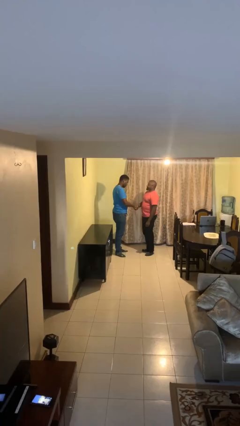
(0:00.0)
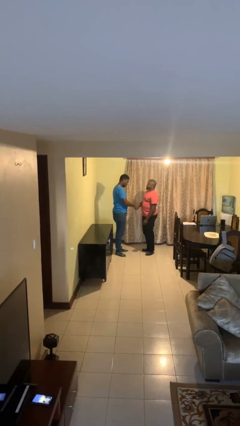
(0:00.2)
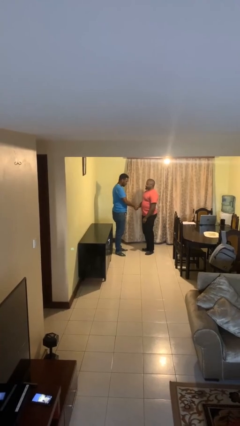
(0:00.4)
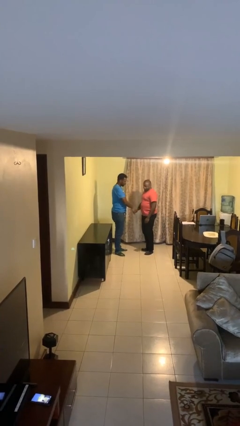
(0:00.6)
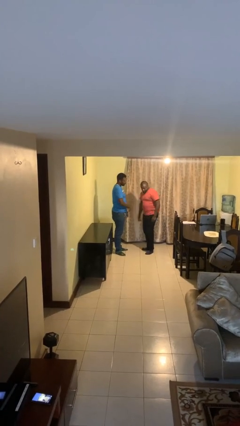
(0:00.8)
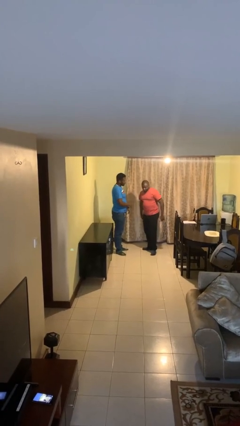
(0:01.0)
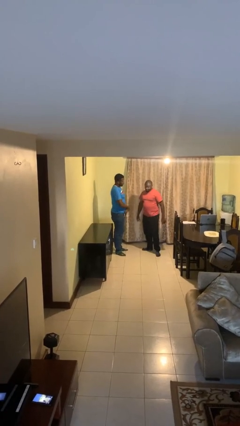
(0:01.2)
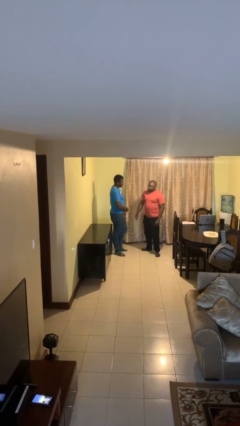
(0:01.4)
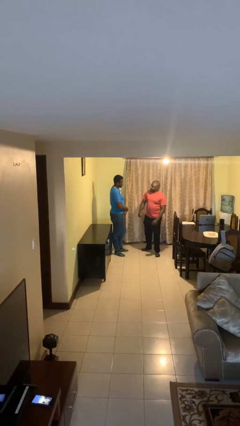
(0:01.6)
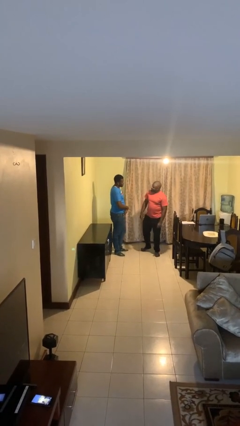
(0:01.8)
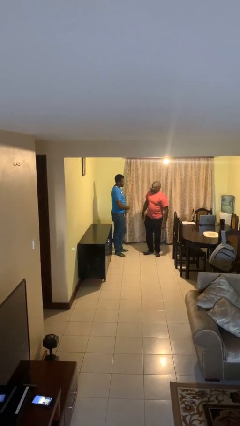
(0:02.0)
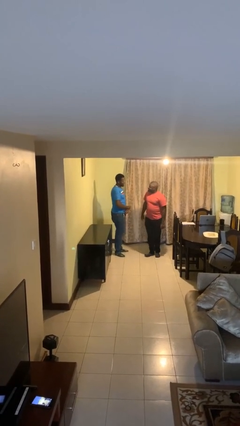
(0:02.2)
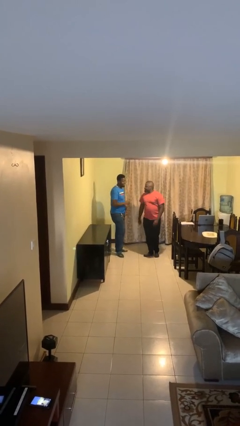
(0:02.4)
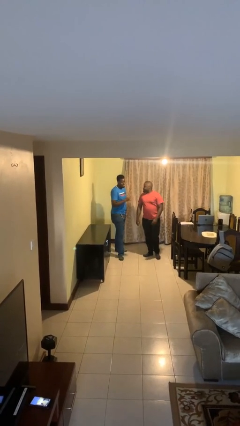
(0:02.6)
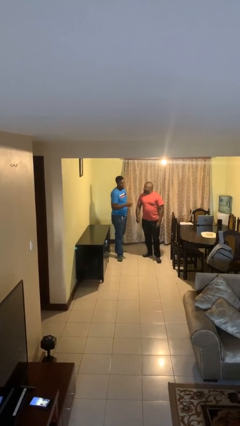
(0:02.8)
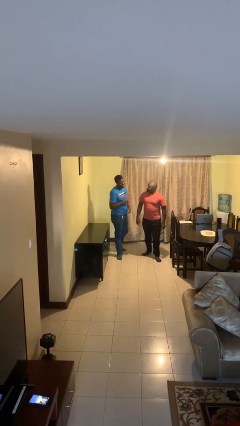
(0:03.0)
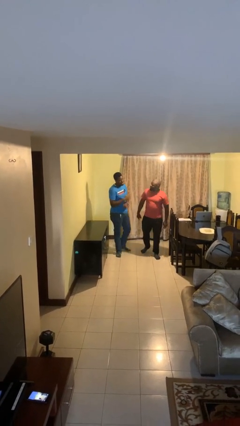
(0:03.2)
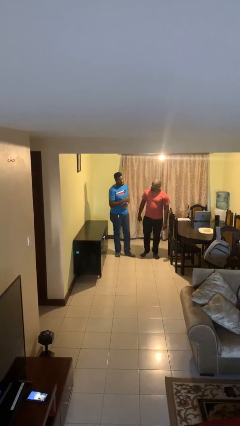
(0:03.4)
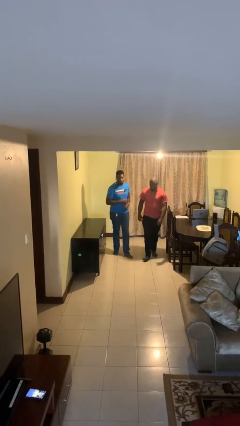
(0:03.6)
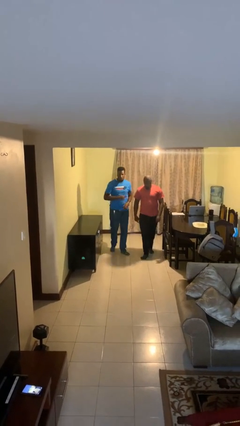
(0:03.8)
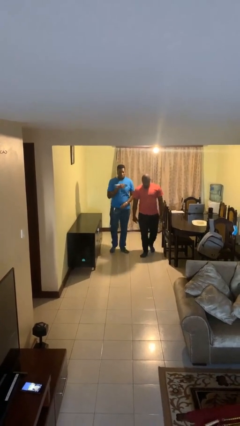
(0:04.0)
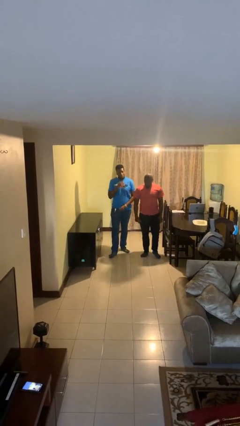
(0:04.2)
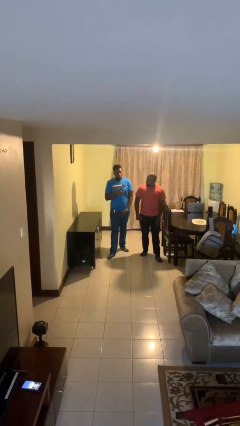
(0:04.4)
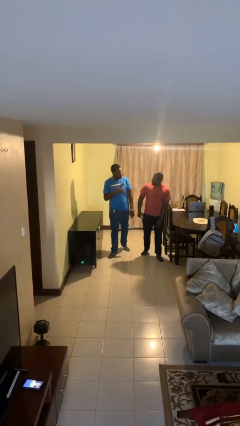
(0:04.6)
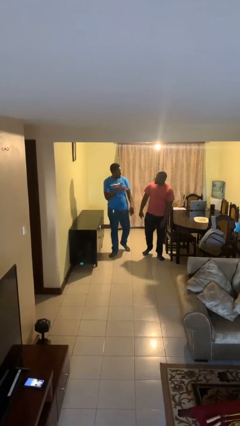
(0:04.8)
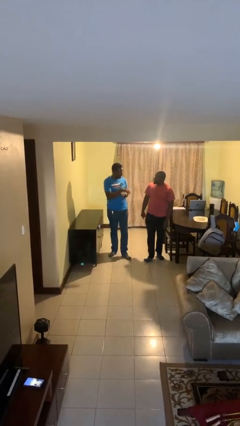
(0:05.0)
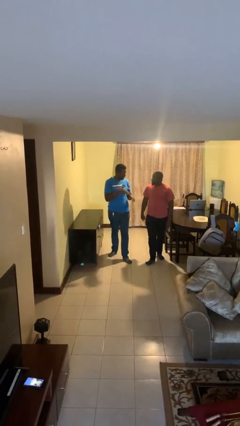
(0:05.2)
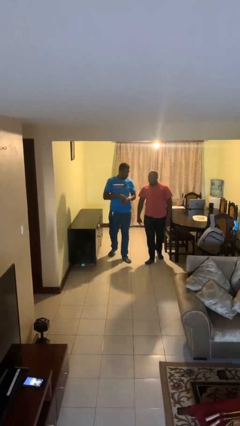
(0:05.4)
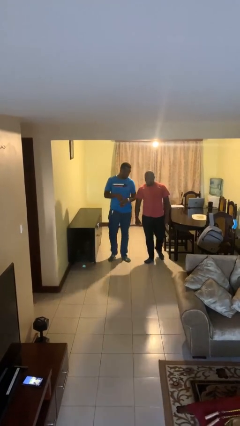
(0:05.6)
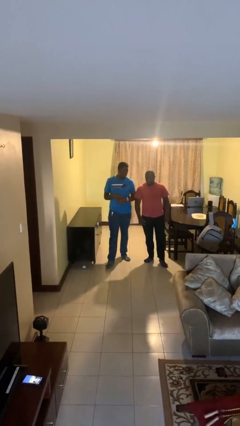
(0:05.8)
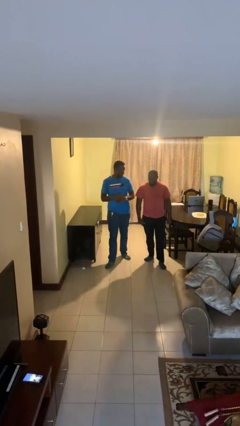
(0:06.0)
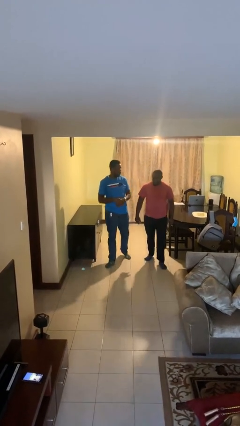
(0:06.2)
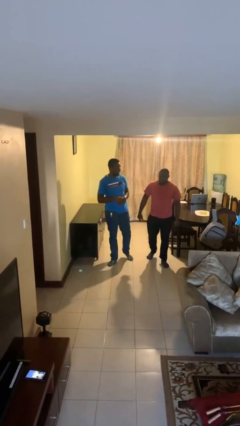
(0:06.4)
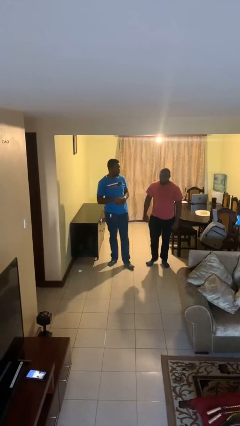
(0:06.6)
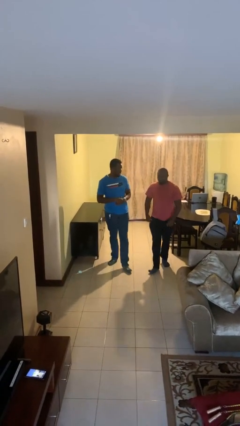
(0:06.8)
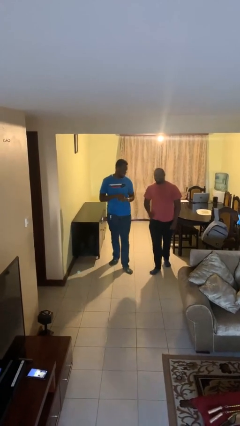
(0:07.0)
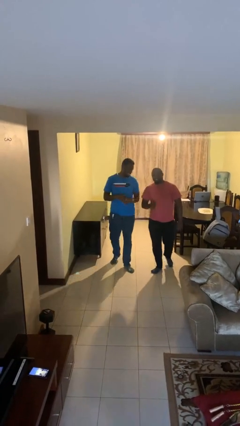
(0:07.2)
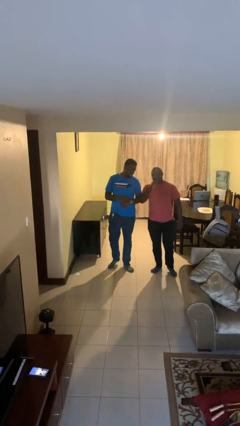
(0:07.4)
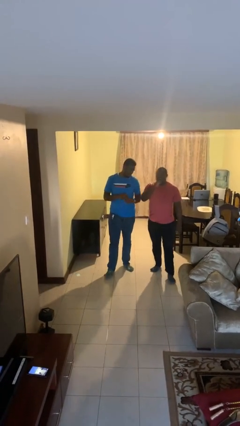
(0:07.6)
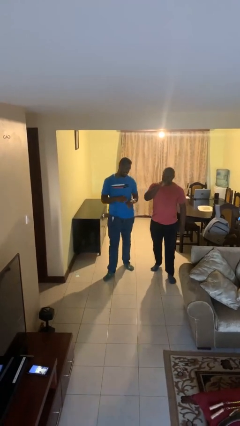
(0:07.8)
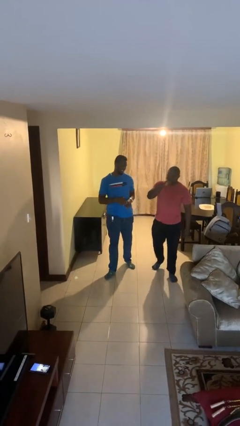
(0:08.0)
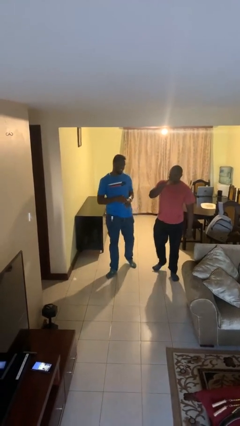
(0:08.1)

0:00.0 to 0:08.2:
person talks to person

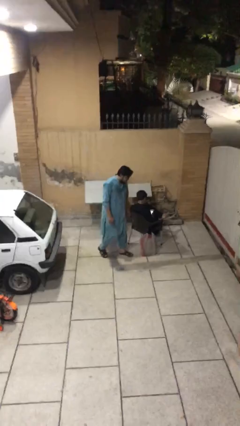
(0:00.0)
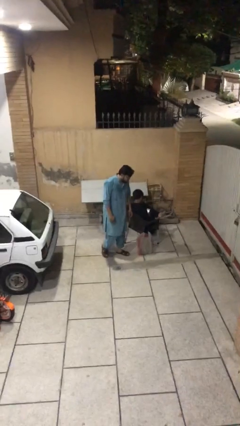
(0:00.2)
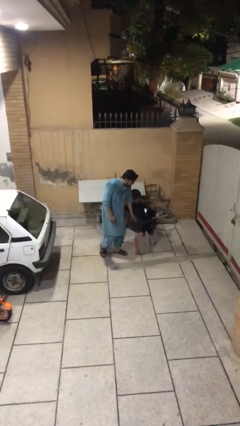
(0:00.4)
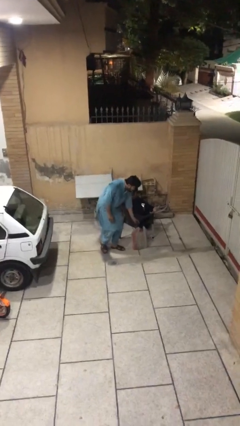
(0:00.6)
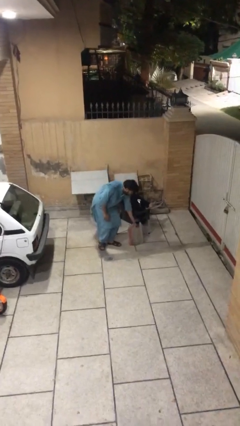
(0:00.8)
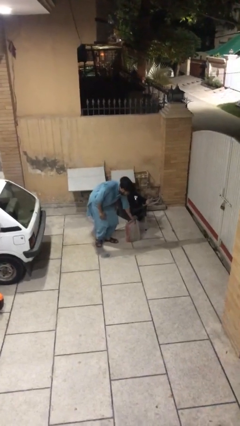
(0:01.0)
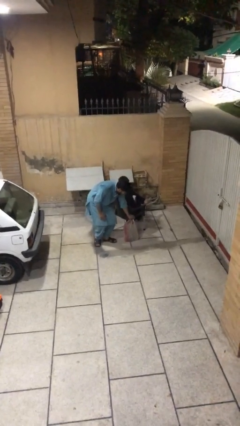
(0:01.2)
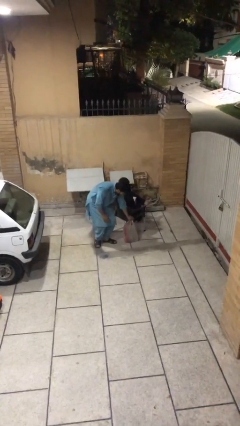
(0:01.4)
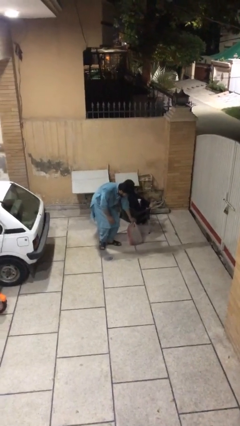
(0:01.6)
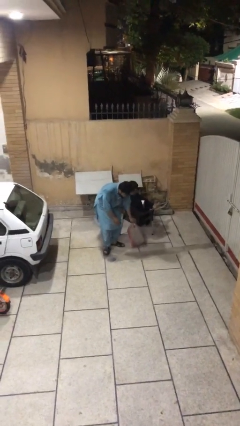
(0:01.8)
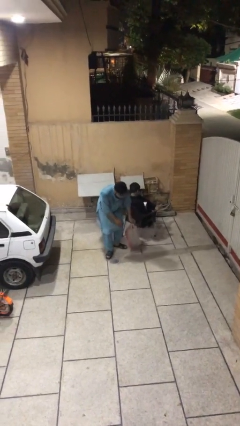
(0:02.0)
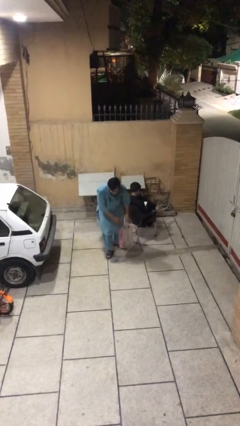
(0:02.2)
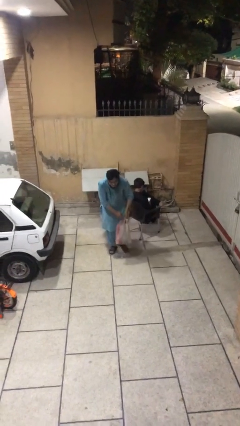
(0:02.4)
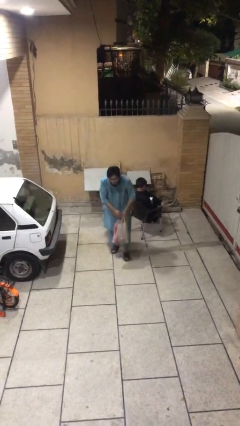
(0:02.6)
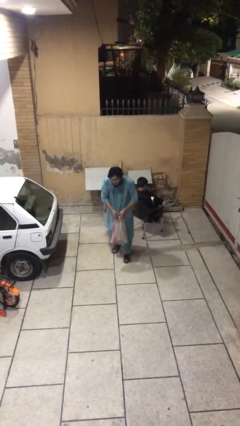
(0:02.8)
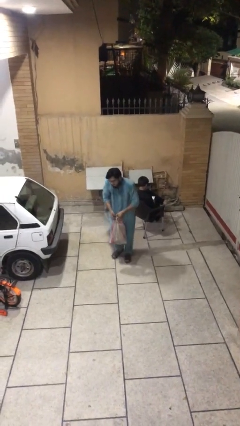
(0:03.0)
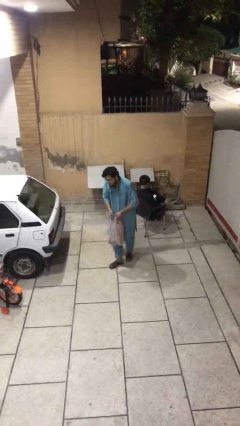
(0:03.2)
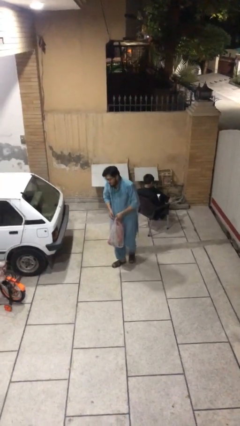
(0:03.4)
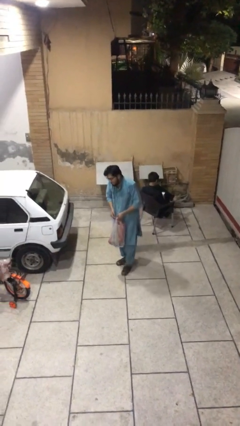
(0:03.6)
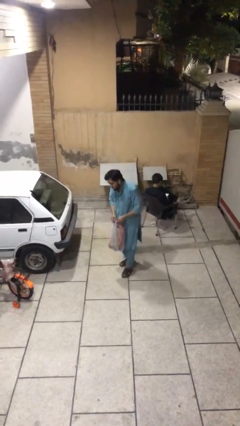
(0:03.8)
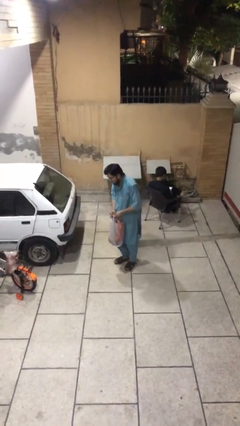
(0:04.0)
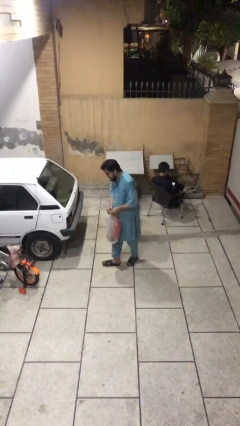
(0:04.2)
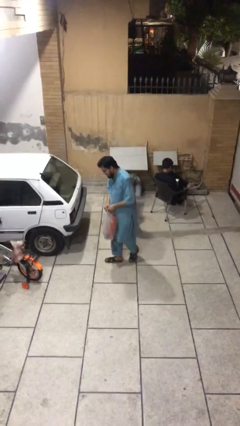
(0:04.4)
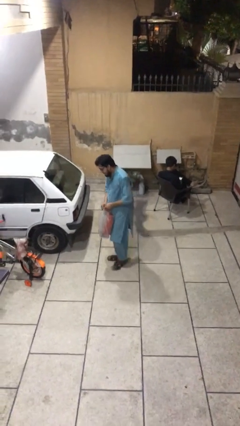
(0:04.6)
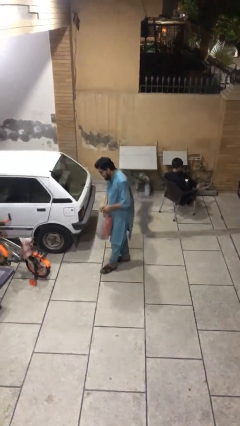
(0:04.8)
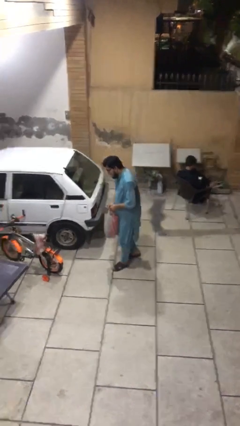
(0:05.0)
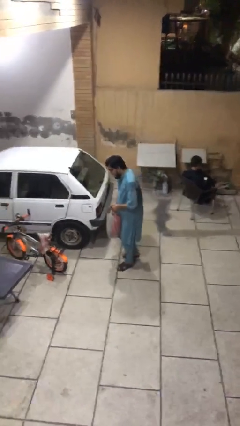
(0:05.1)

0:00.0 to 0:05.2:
person steals object from person

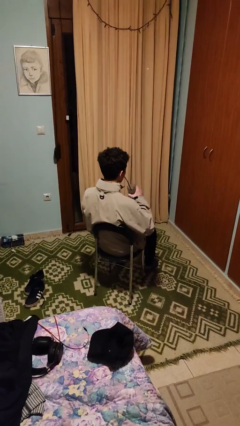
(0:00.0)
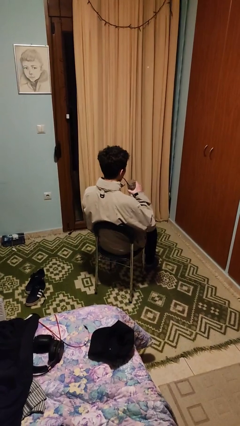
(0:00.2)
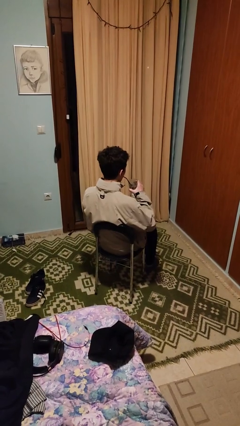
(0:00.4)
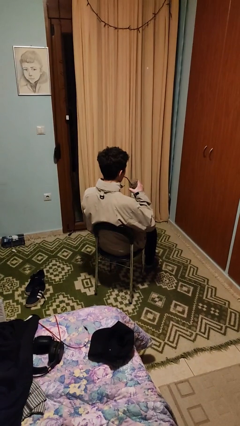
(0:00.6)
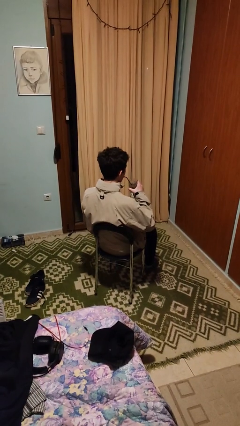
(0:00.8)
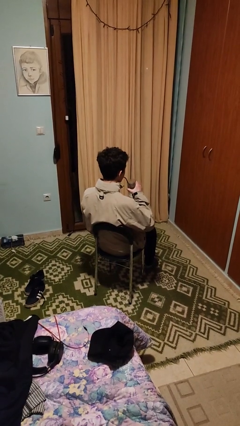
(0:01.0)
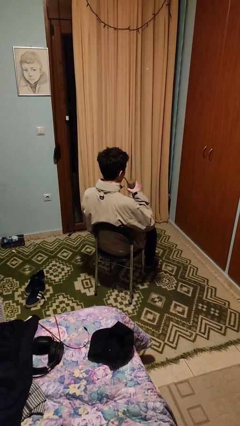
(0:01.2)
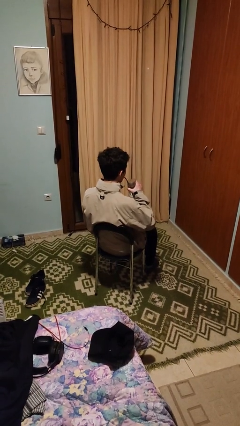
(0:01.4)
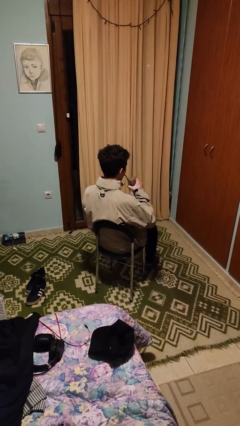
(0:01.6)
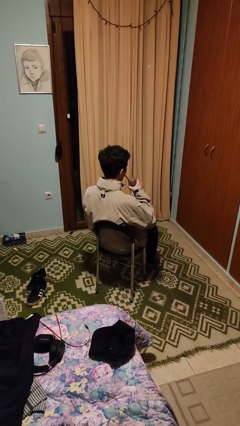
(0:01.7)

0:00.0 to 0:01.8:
person drinks from straw

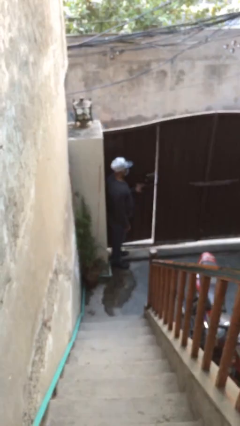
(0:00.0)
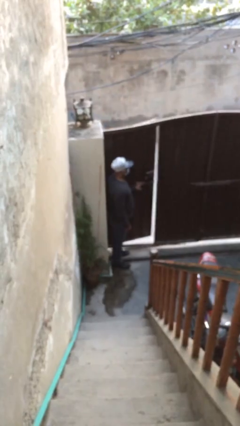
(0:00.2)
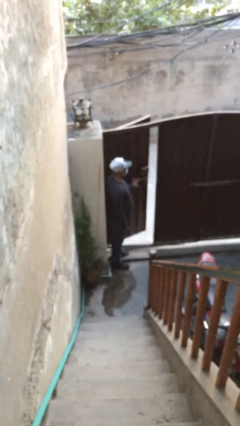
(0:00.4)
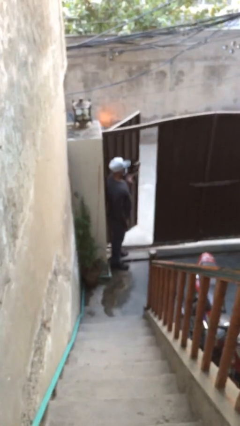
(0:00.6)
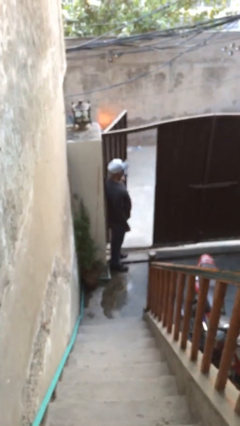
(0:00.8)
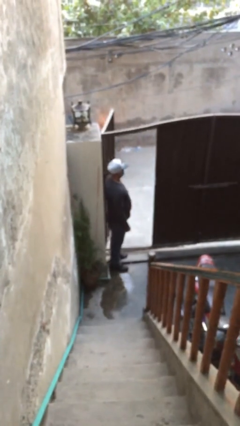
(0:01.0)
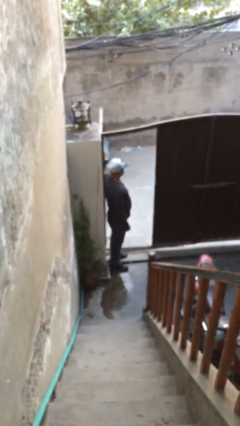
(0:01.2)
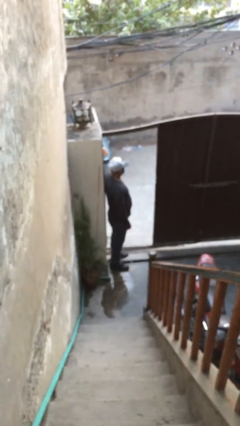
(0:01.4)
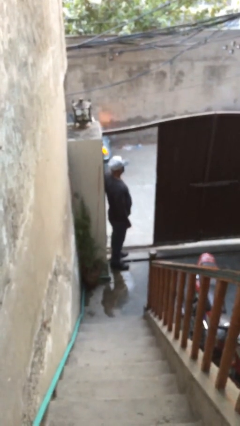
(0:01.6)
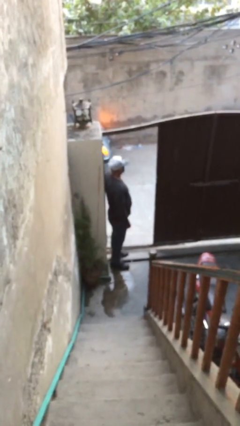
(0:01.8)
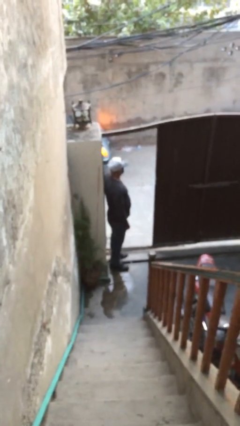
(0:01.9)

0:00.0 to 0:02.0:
person opens facility door

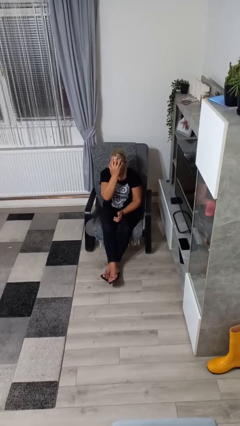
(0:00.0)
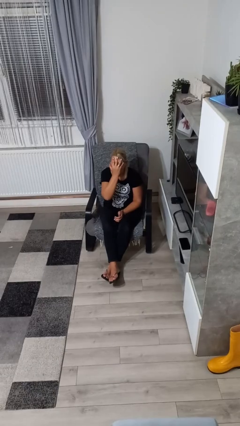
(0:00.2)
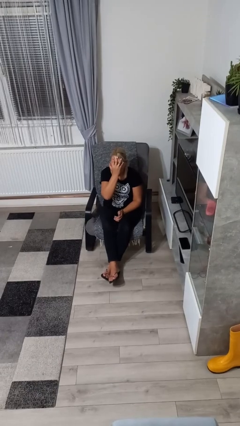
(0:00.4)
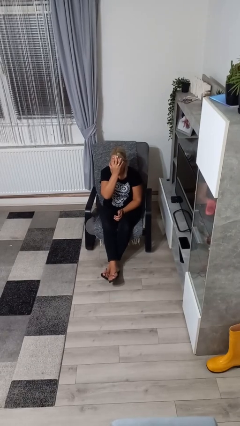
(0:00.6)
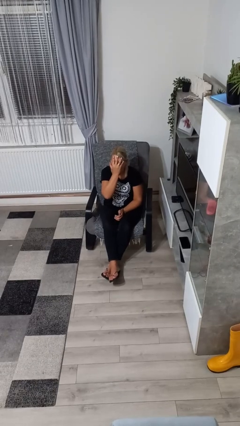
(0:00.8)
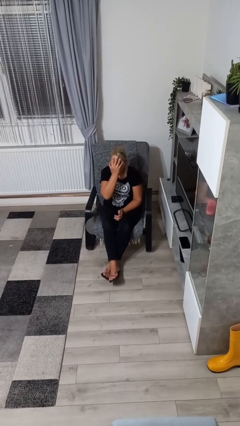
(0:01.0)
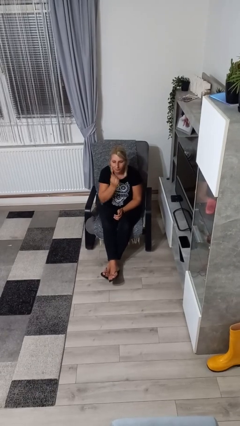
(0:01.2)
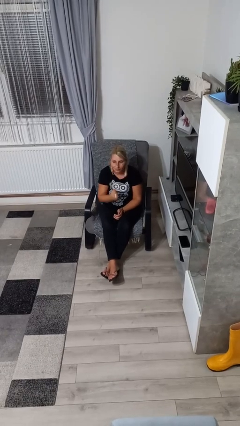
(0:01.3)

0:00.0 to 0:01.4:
person covers face with hands
